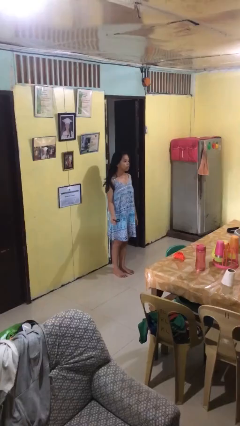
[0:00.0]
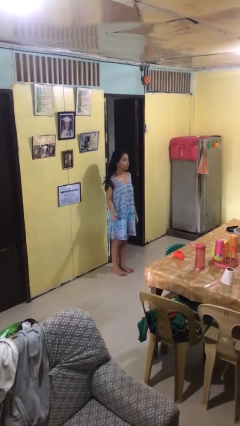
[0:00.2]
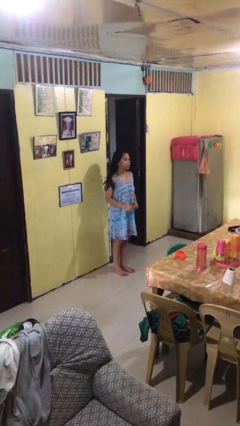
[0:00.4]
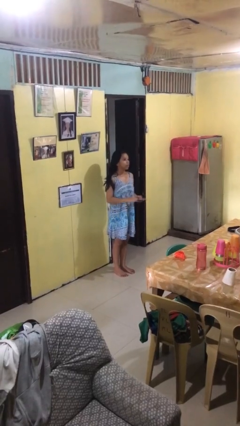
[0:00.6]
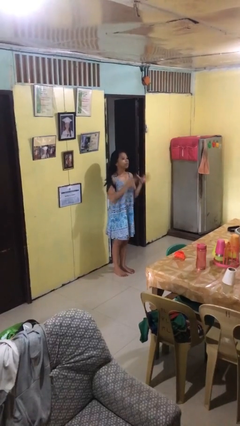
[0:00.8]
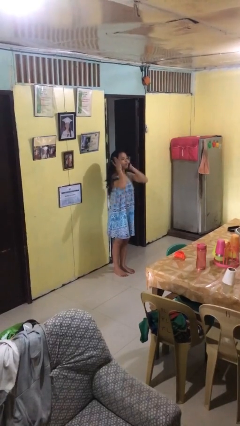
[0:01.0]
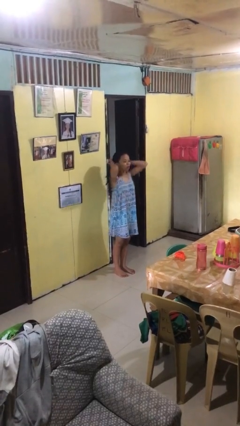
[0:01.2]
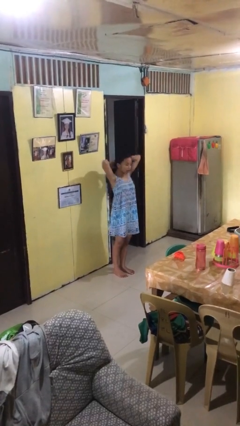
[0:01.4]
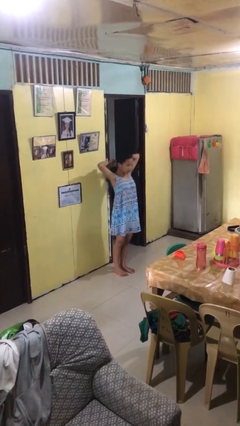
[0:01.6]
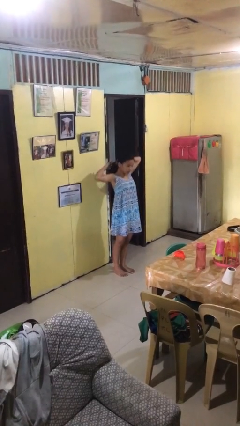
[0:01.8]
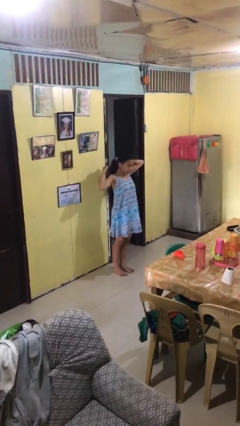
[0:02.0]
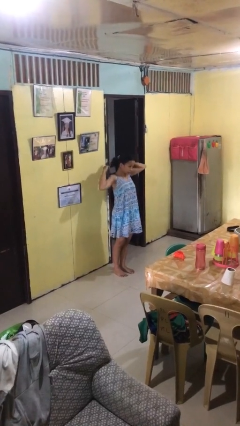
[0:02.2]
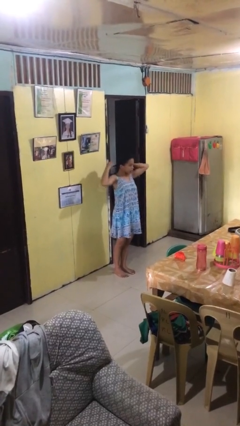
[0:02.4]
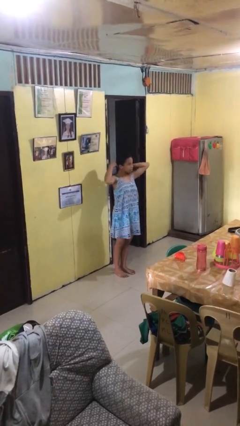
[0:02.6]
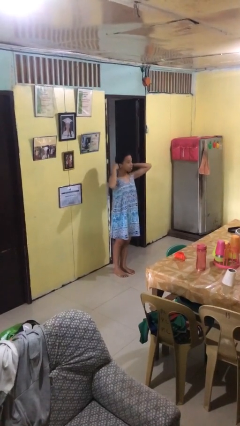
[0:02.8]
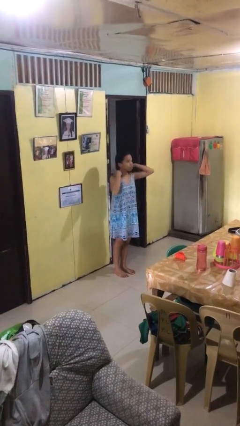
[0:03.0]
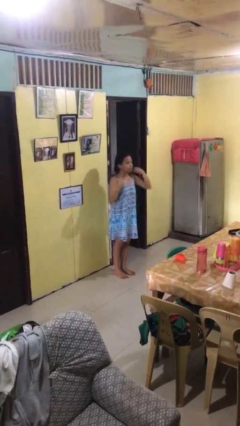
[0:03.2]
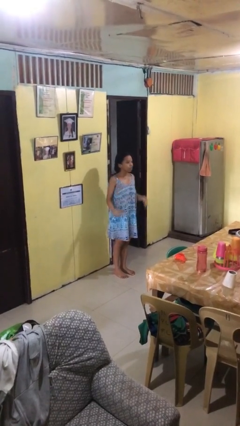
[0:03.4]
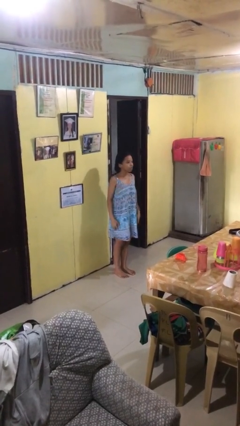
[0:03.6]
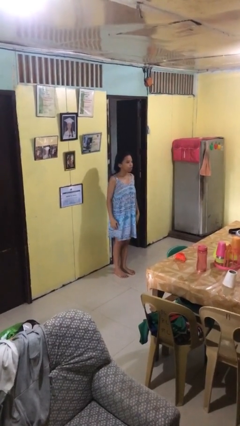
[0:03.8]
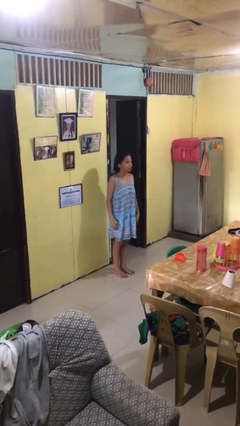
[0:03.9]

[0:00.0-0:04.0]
person puts hair in ponytail

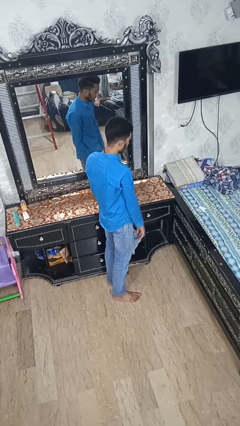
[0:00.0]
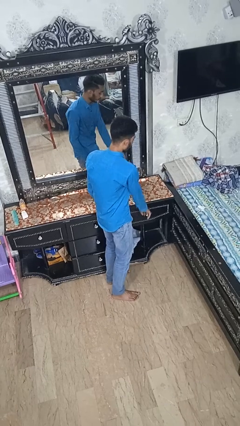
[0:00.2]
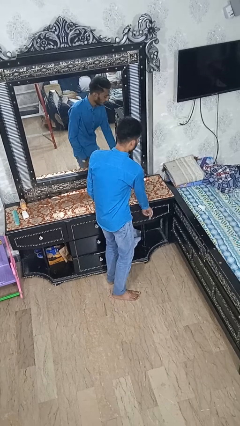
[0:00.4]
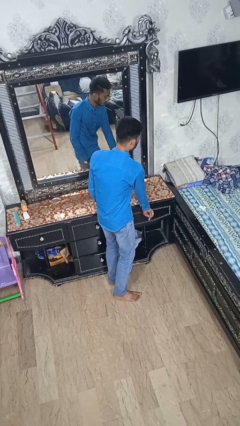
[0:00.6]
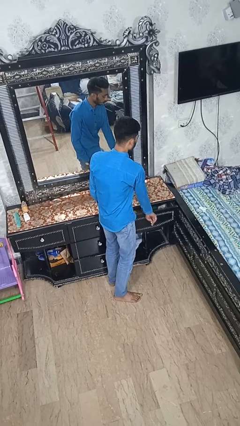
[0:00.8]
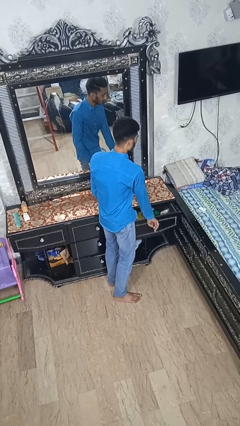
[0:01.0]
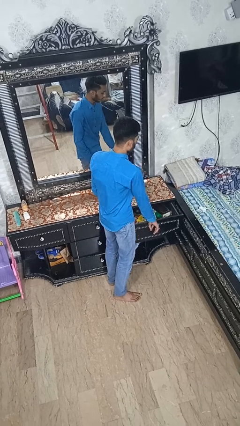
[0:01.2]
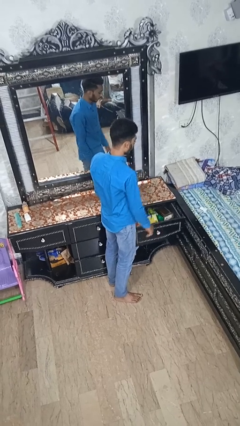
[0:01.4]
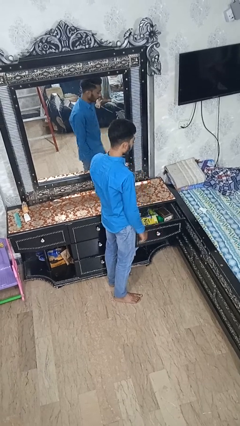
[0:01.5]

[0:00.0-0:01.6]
person opens dresser drawer

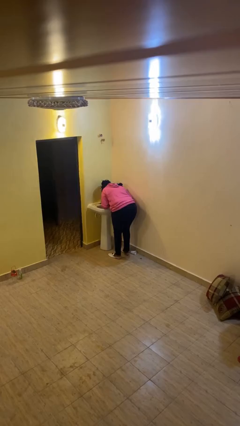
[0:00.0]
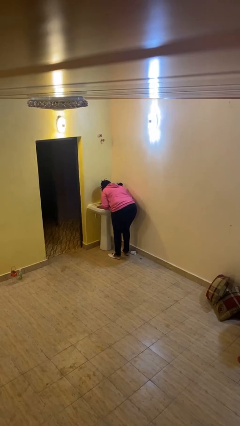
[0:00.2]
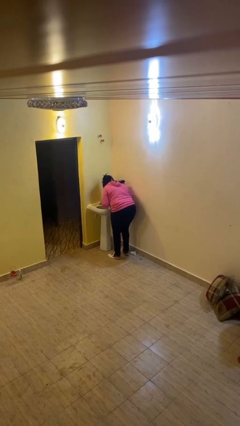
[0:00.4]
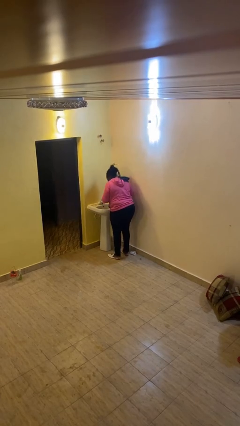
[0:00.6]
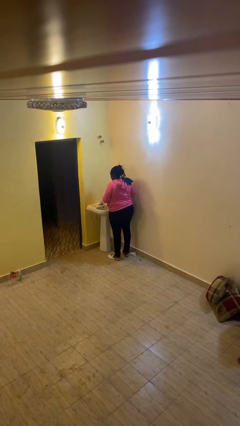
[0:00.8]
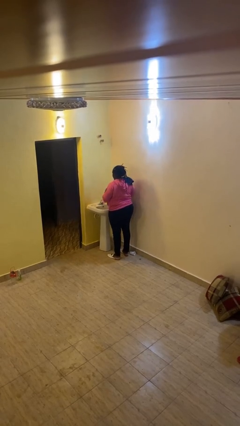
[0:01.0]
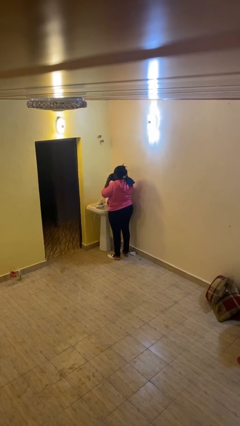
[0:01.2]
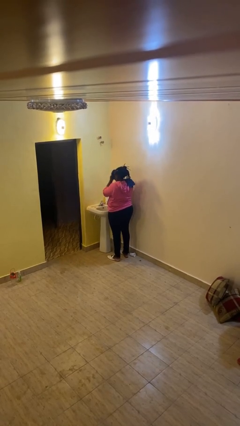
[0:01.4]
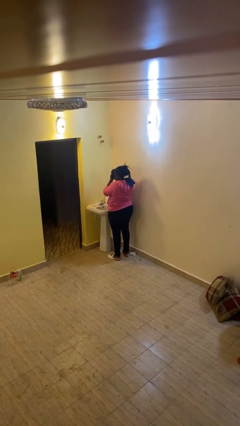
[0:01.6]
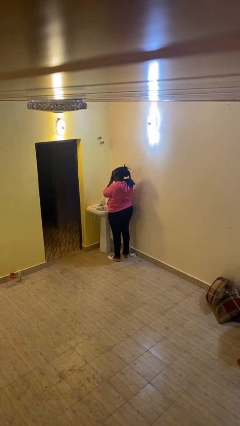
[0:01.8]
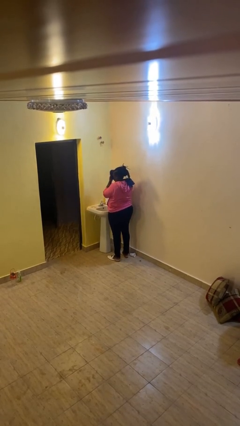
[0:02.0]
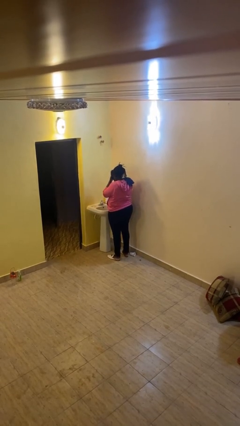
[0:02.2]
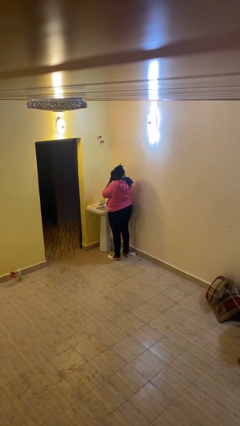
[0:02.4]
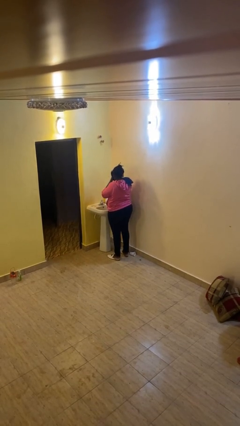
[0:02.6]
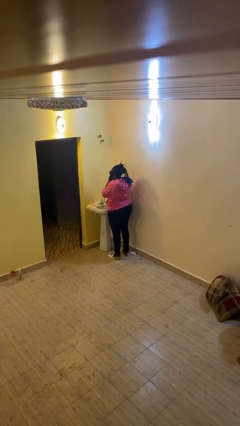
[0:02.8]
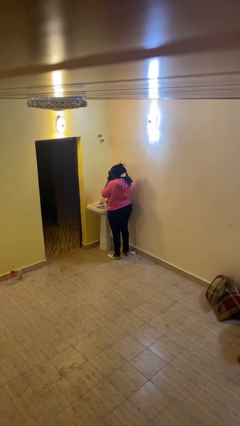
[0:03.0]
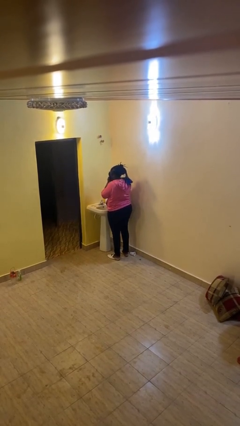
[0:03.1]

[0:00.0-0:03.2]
person dries face with towel

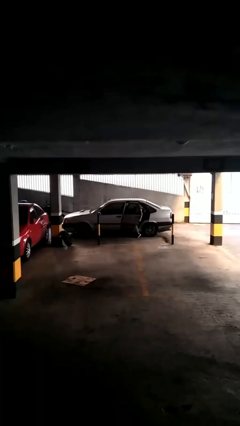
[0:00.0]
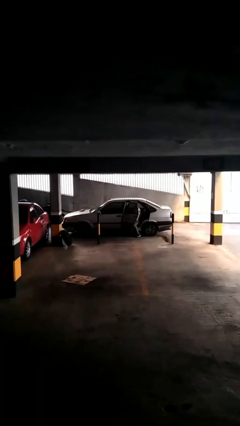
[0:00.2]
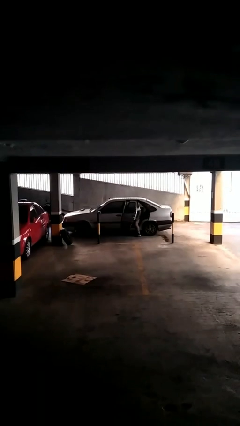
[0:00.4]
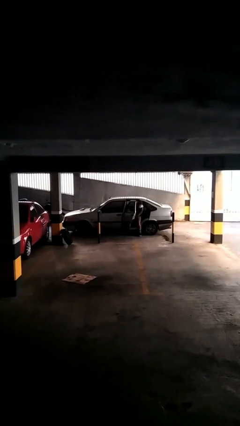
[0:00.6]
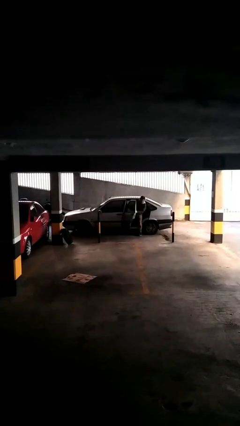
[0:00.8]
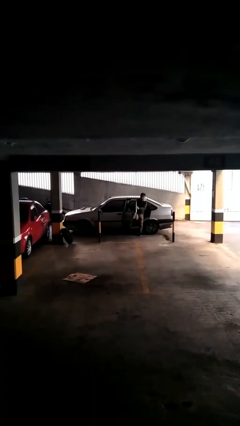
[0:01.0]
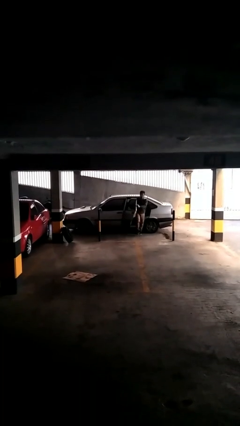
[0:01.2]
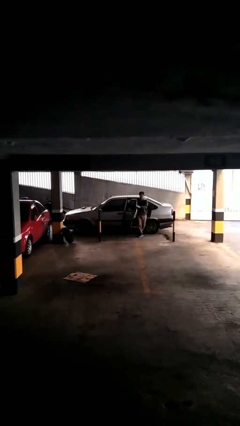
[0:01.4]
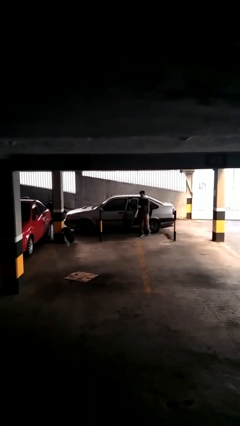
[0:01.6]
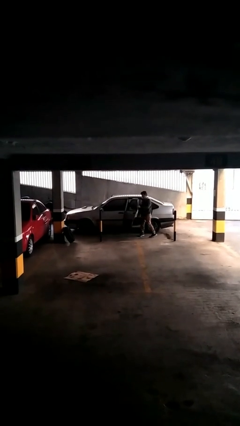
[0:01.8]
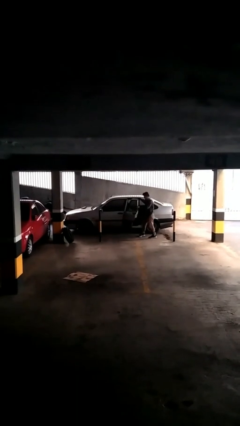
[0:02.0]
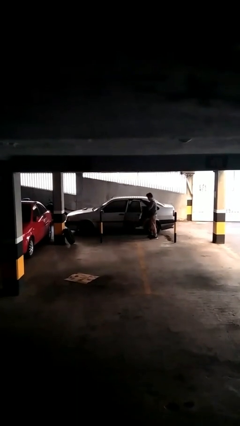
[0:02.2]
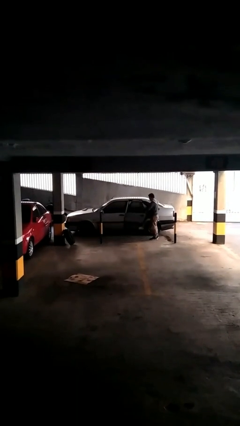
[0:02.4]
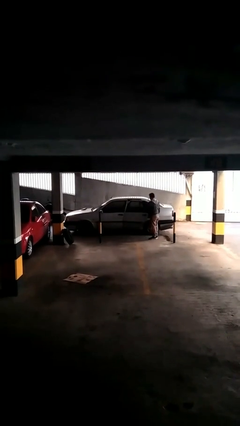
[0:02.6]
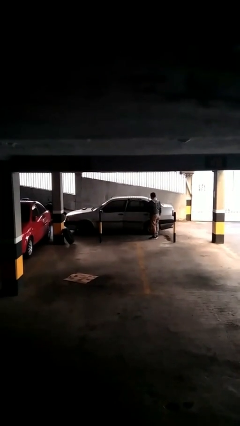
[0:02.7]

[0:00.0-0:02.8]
car drops off person

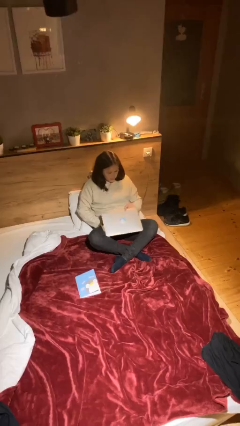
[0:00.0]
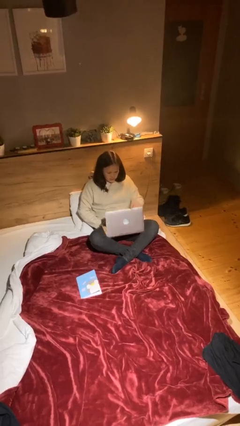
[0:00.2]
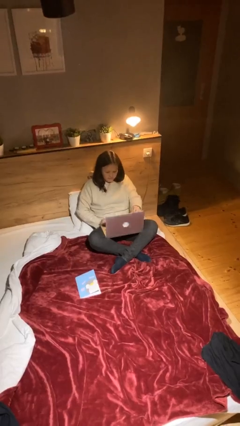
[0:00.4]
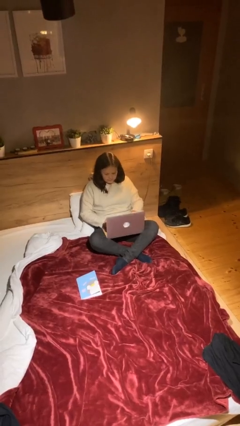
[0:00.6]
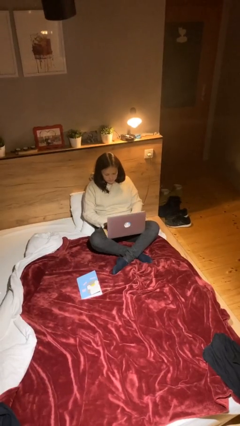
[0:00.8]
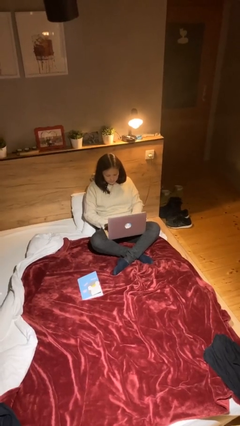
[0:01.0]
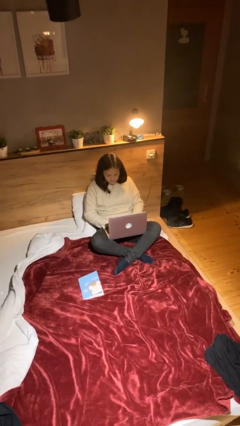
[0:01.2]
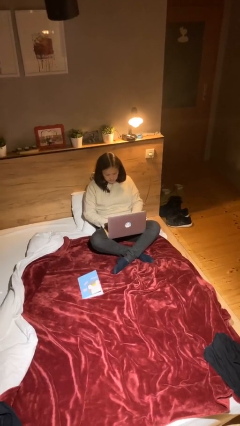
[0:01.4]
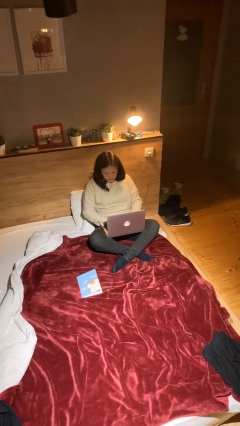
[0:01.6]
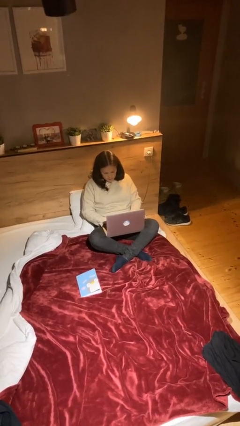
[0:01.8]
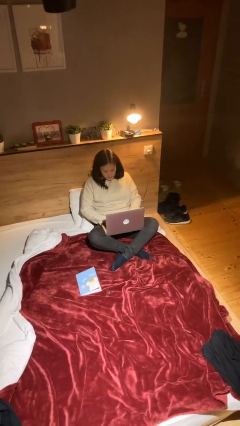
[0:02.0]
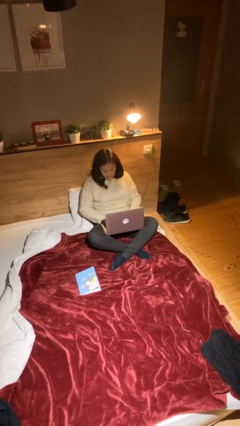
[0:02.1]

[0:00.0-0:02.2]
person interacts with laptop

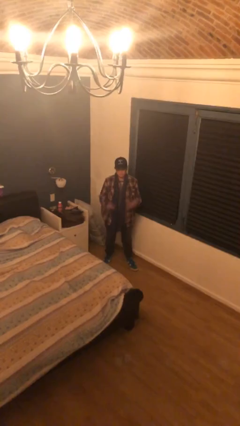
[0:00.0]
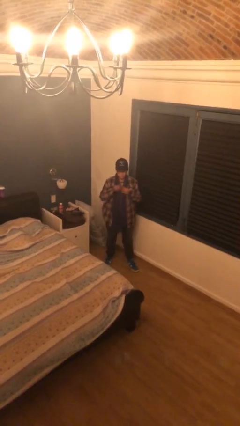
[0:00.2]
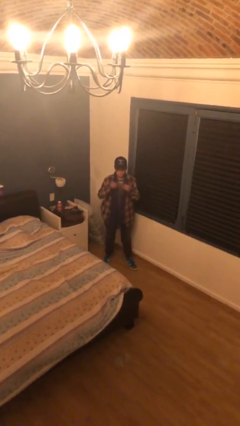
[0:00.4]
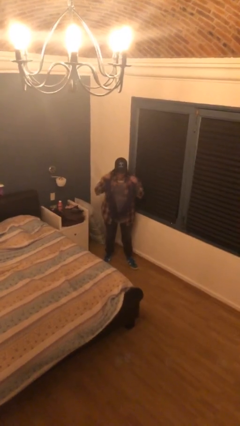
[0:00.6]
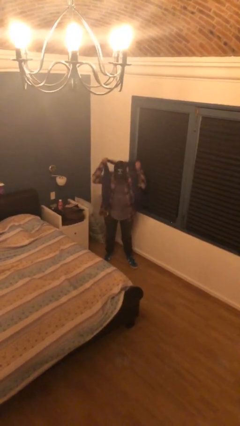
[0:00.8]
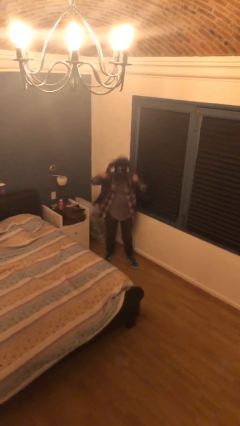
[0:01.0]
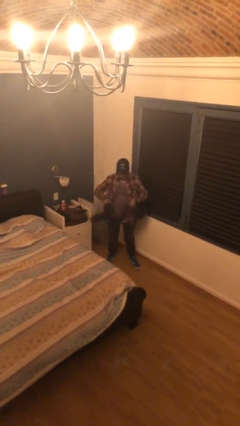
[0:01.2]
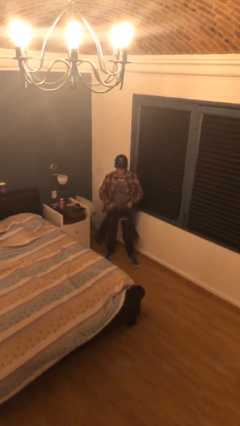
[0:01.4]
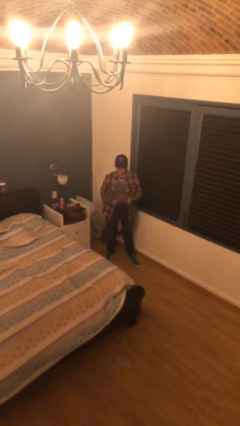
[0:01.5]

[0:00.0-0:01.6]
person takes off scarf

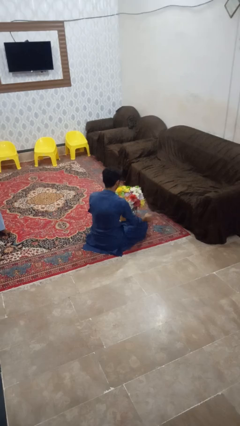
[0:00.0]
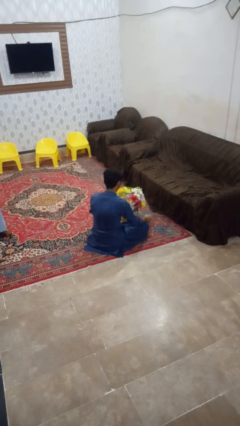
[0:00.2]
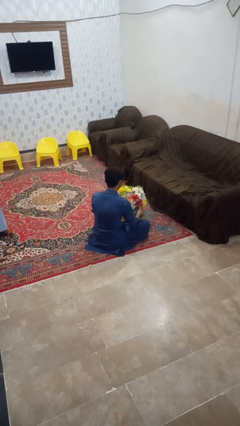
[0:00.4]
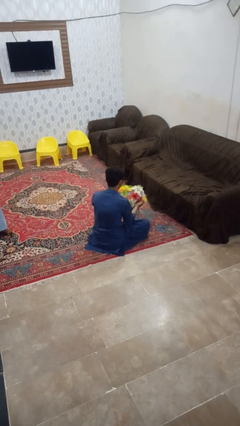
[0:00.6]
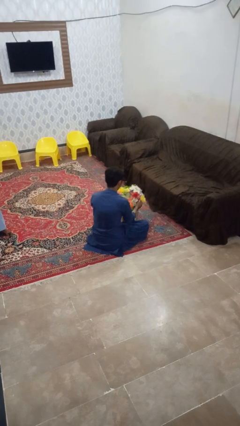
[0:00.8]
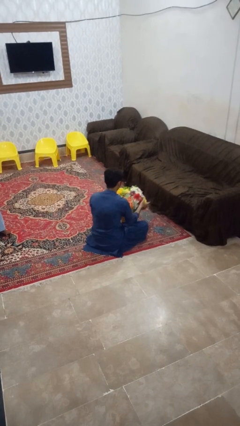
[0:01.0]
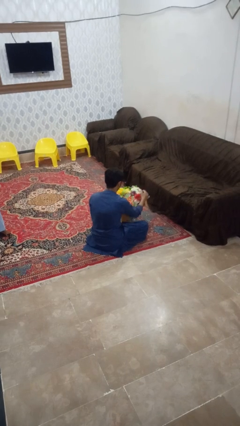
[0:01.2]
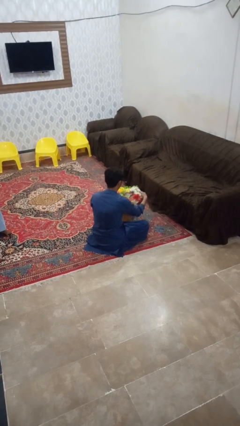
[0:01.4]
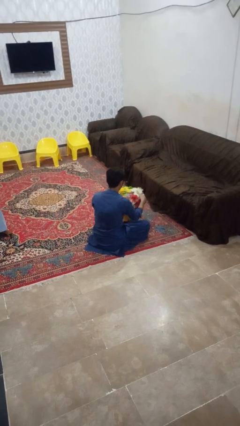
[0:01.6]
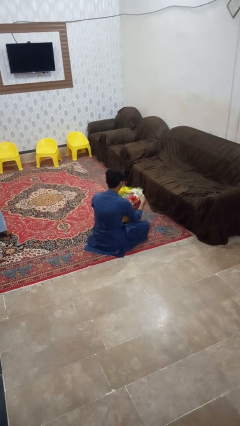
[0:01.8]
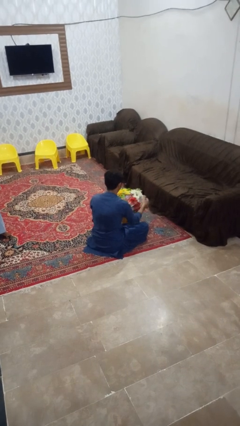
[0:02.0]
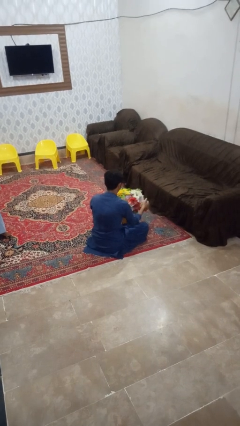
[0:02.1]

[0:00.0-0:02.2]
person arranges flowers in vase
